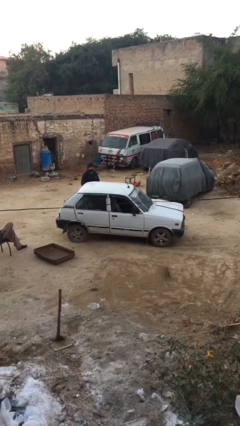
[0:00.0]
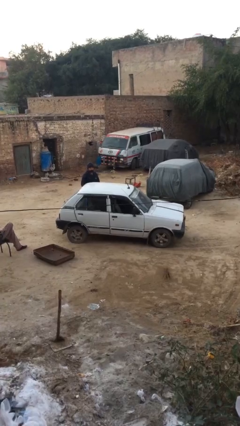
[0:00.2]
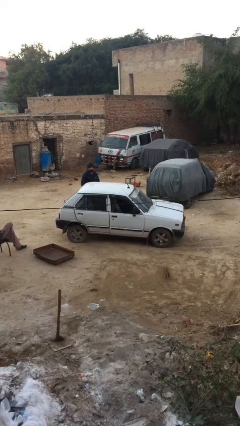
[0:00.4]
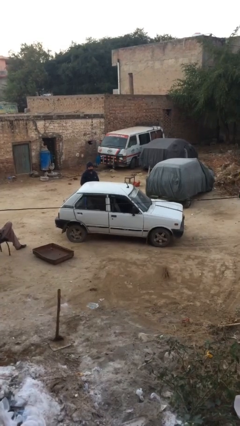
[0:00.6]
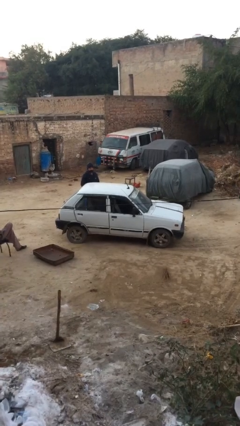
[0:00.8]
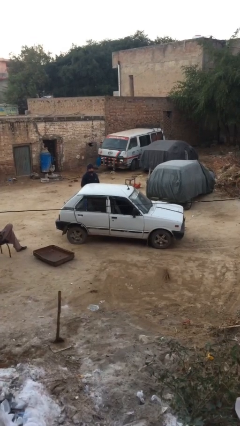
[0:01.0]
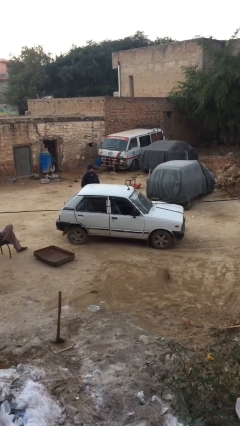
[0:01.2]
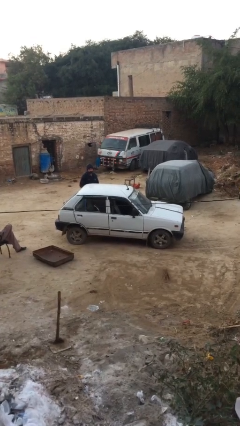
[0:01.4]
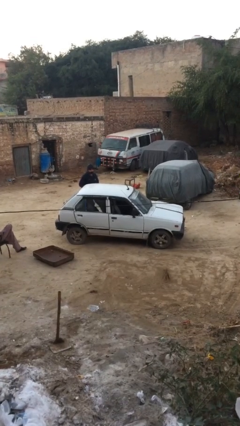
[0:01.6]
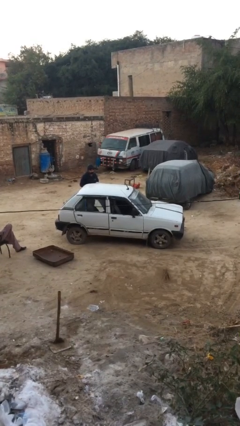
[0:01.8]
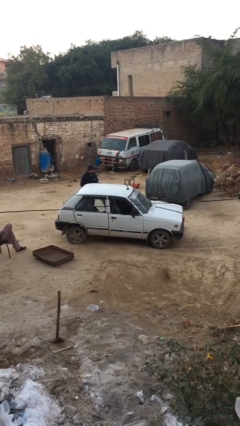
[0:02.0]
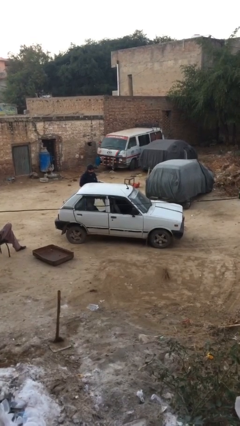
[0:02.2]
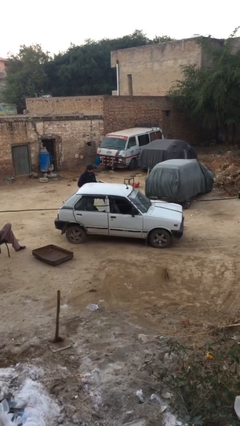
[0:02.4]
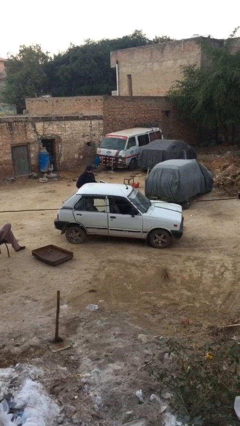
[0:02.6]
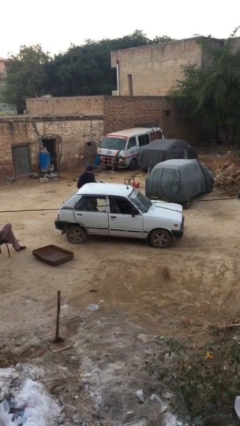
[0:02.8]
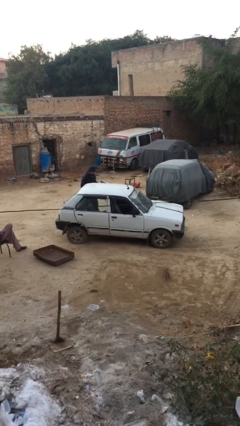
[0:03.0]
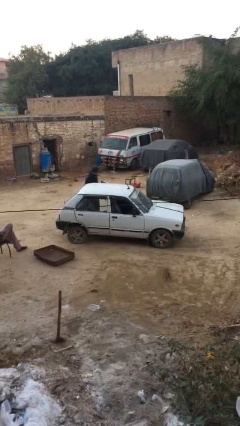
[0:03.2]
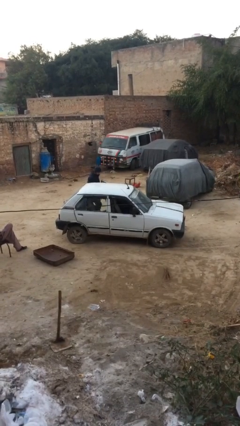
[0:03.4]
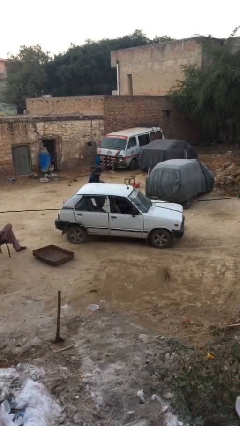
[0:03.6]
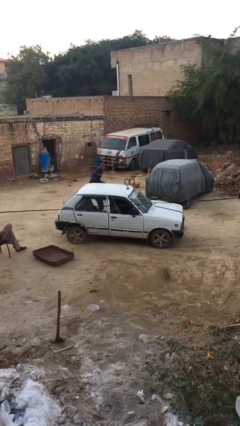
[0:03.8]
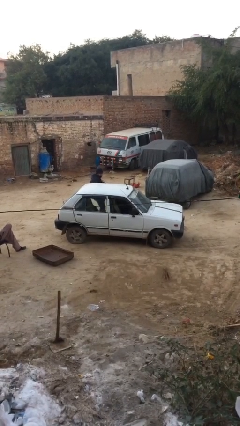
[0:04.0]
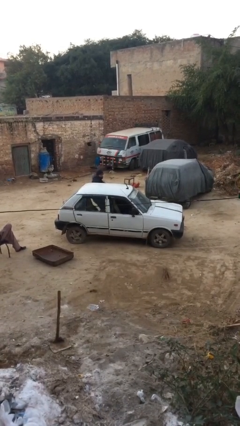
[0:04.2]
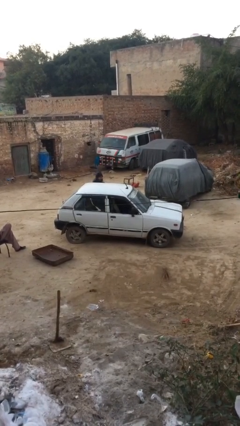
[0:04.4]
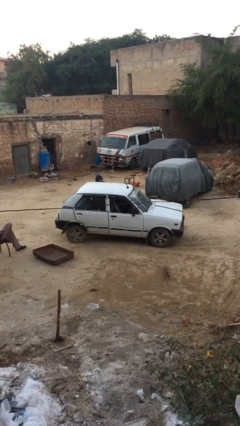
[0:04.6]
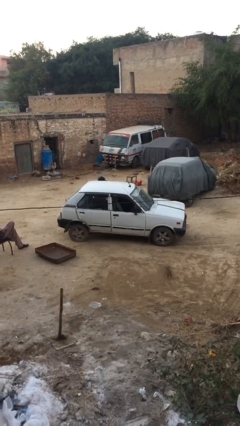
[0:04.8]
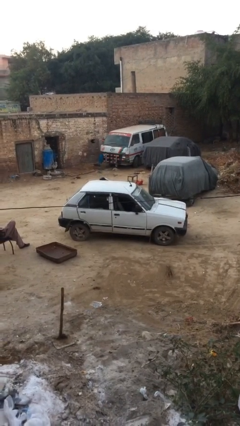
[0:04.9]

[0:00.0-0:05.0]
person enters car

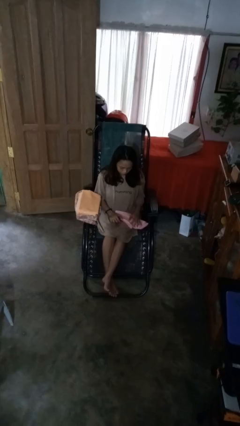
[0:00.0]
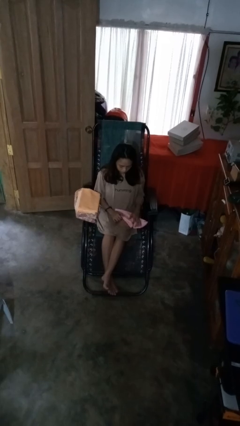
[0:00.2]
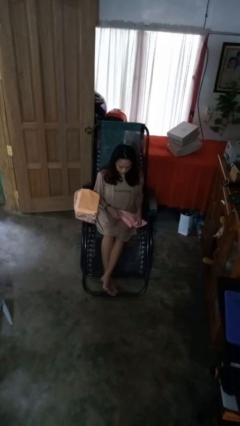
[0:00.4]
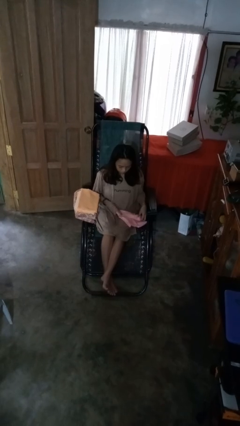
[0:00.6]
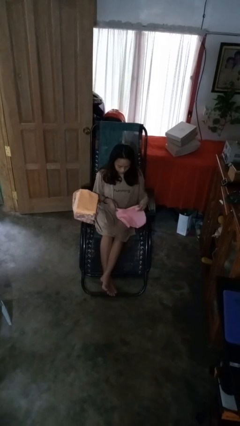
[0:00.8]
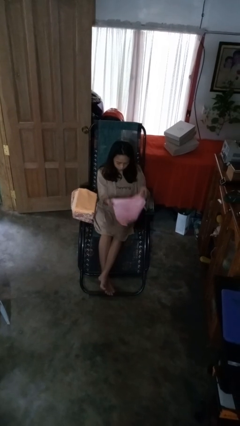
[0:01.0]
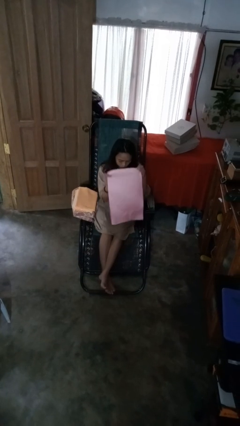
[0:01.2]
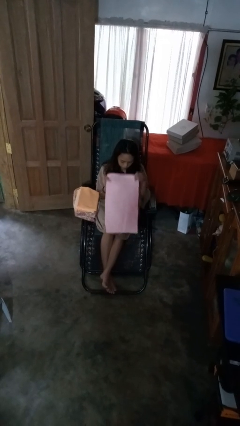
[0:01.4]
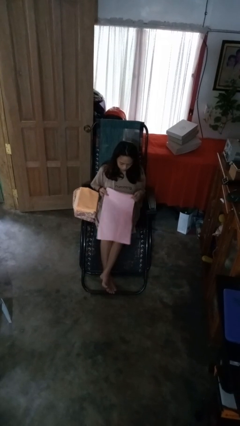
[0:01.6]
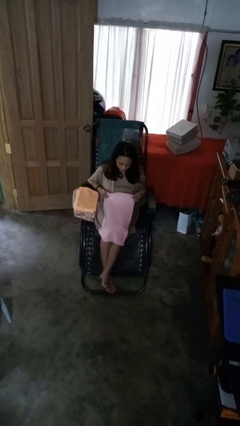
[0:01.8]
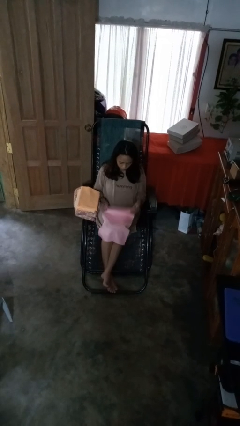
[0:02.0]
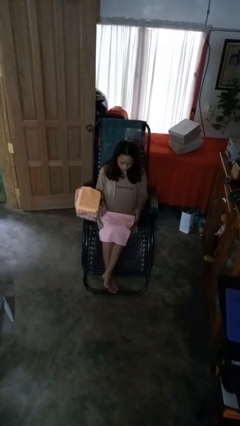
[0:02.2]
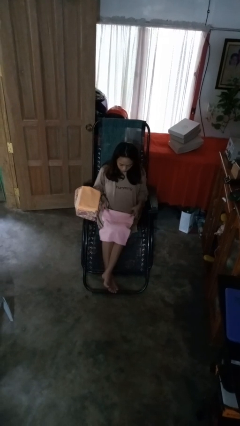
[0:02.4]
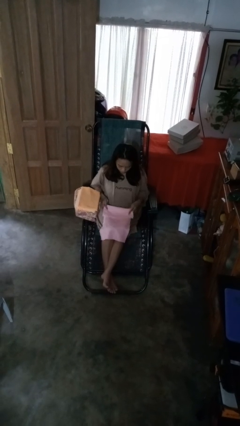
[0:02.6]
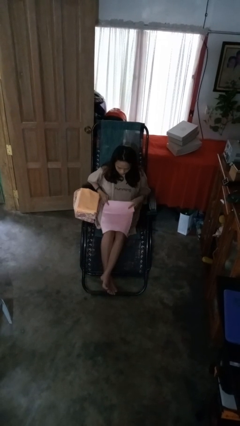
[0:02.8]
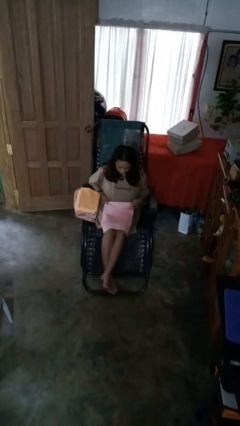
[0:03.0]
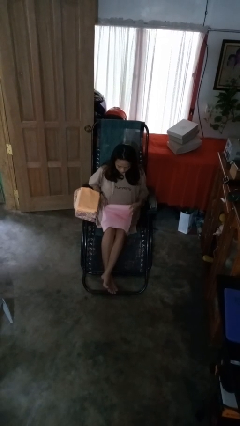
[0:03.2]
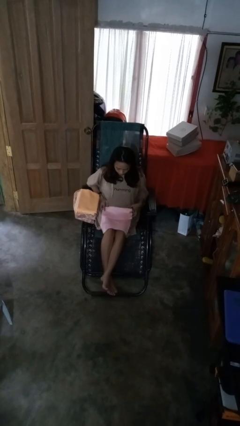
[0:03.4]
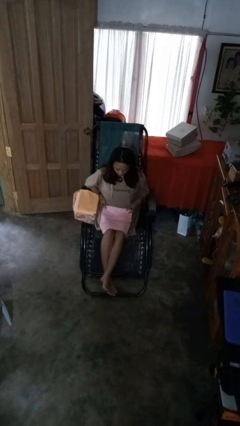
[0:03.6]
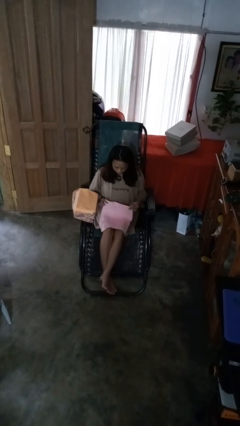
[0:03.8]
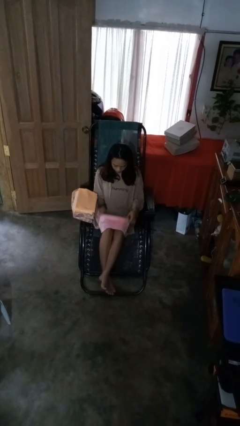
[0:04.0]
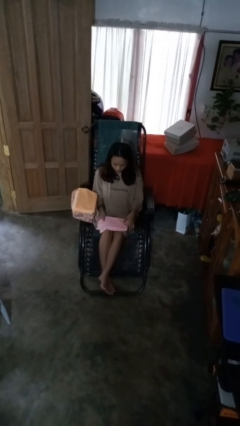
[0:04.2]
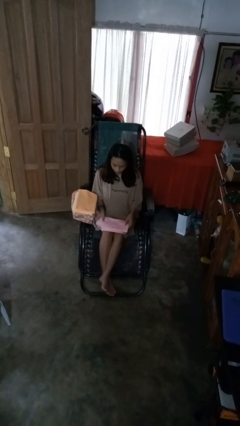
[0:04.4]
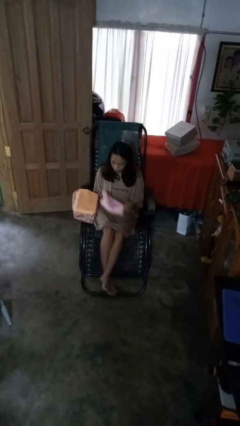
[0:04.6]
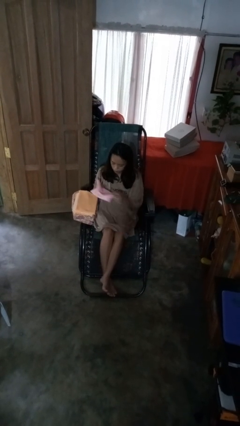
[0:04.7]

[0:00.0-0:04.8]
person folds towel

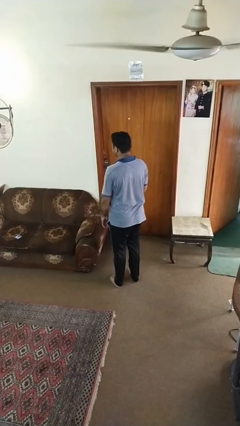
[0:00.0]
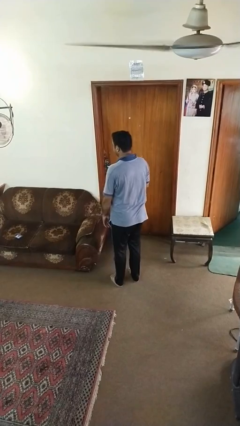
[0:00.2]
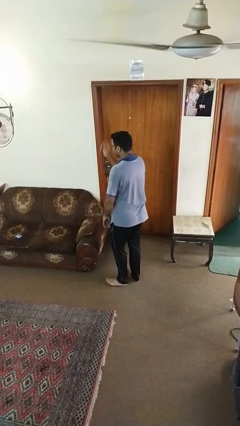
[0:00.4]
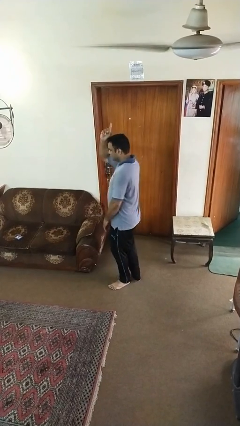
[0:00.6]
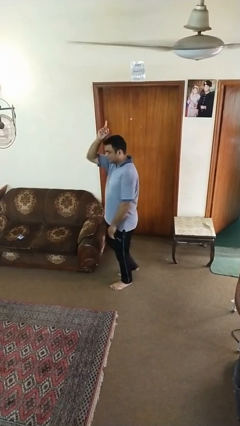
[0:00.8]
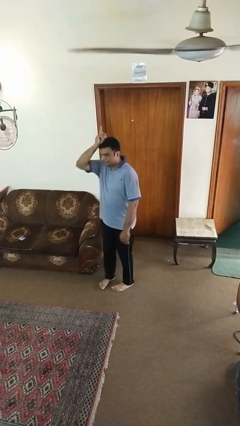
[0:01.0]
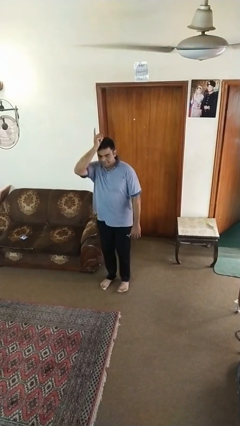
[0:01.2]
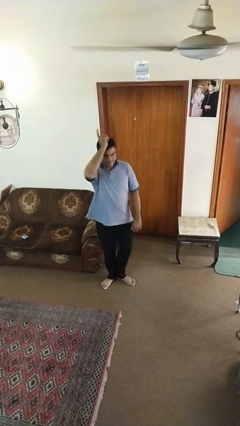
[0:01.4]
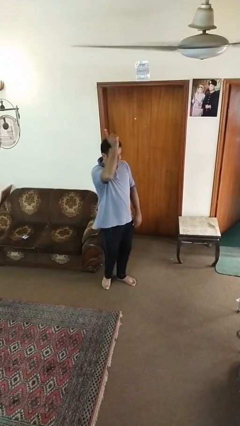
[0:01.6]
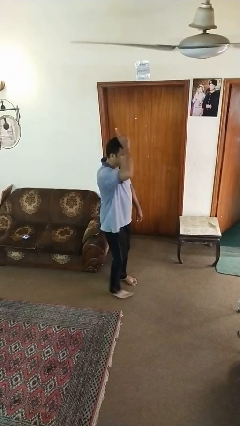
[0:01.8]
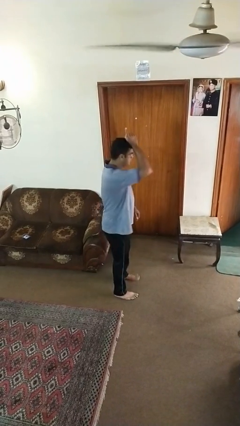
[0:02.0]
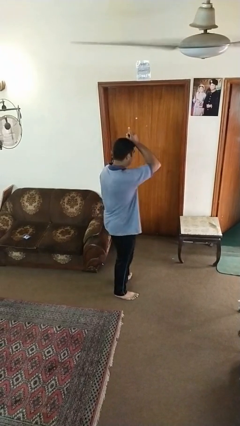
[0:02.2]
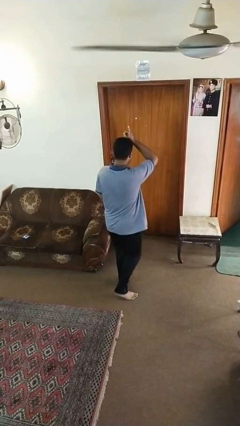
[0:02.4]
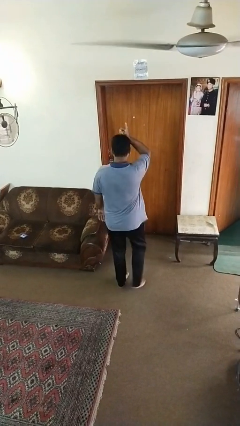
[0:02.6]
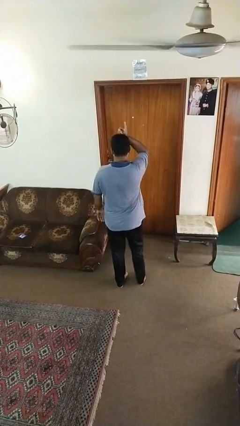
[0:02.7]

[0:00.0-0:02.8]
person twirls

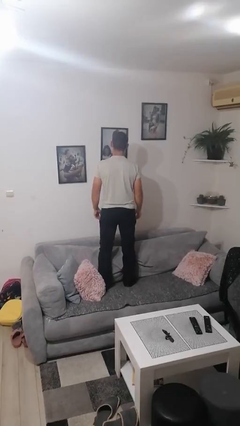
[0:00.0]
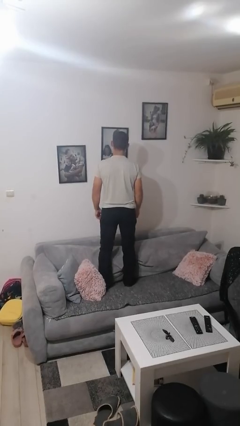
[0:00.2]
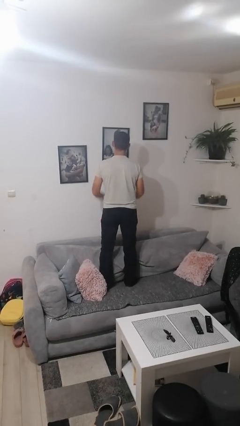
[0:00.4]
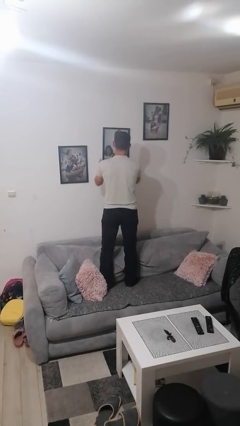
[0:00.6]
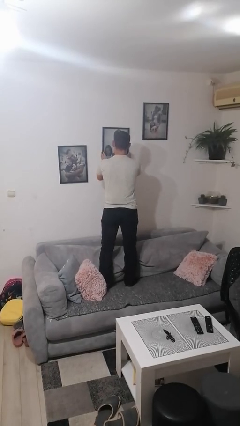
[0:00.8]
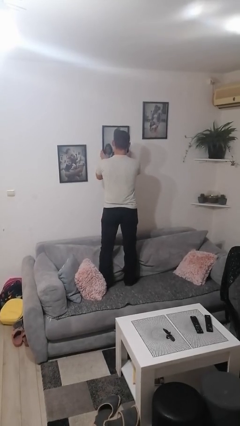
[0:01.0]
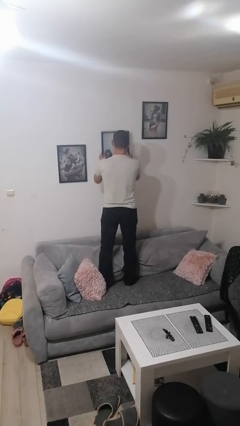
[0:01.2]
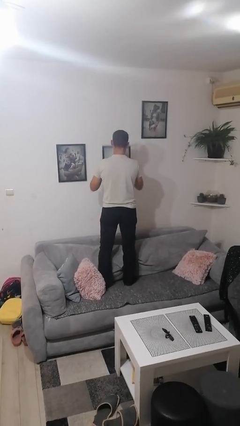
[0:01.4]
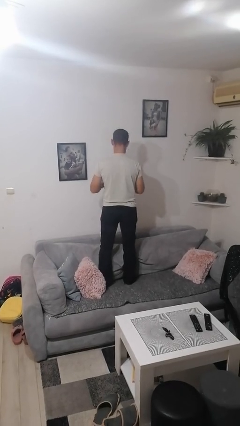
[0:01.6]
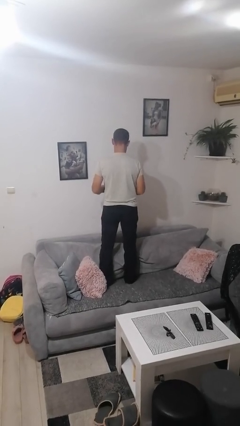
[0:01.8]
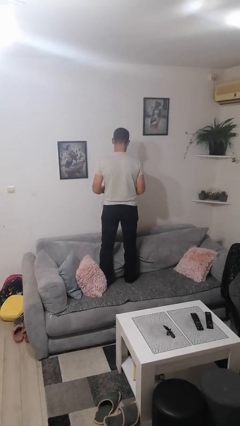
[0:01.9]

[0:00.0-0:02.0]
person takes down picture frame

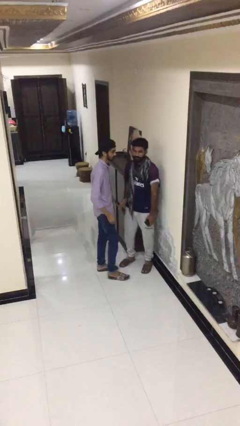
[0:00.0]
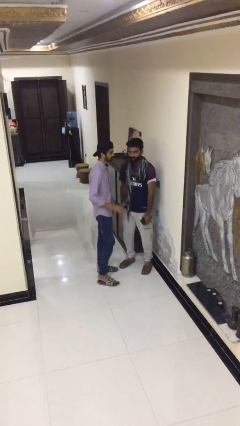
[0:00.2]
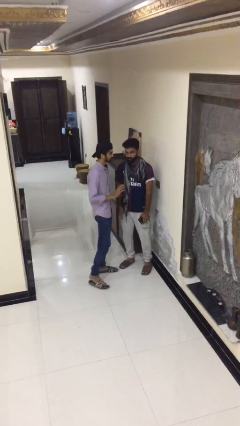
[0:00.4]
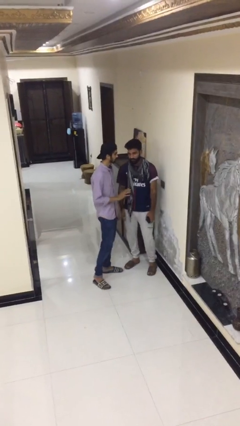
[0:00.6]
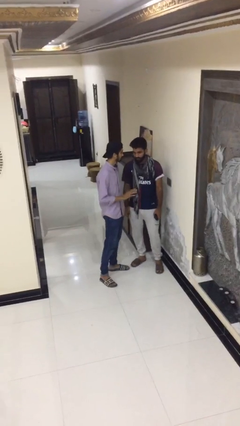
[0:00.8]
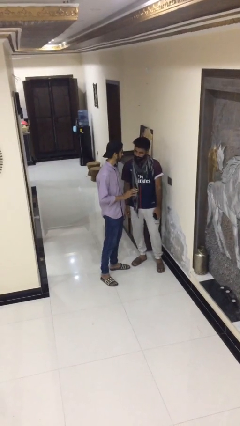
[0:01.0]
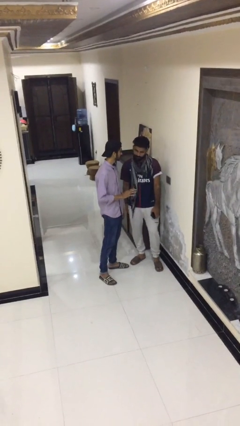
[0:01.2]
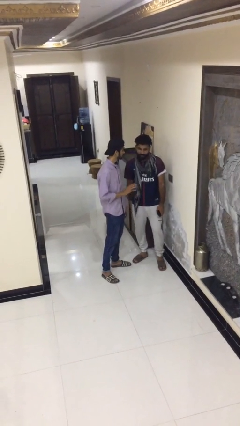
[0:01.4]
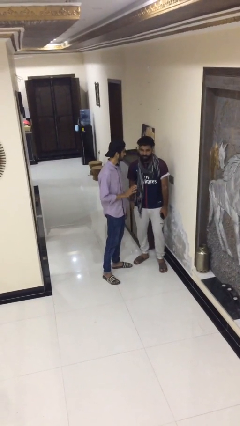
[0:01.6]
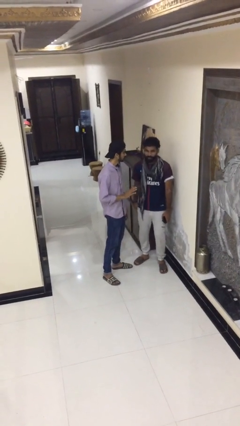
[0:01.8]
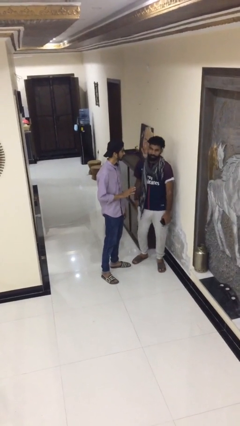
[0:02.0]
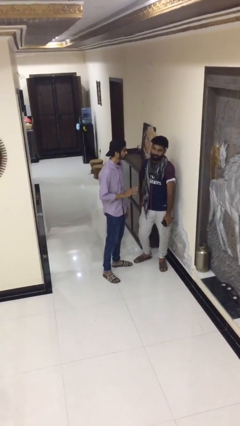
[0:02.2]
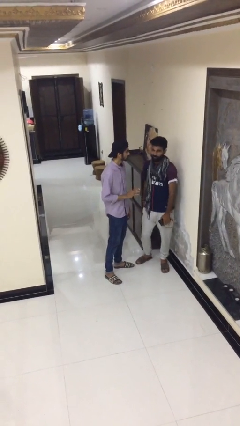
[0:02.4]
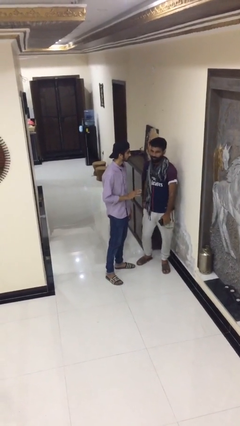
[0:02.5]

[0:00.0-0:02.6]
person talks to person

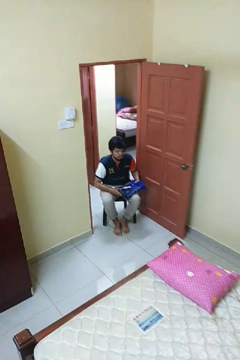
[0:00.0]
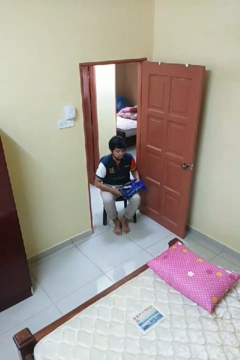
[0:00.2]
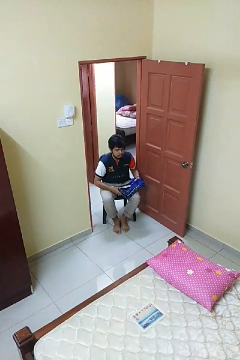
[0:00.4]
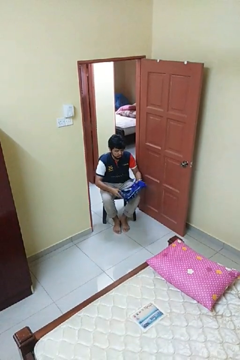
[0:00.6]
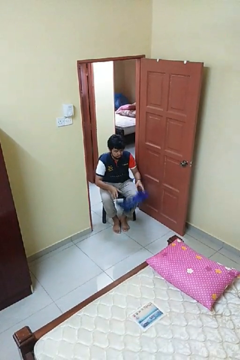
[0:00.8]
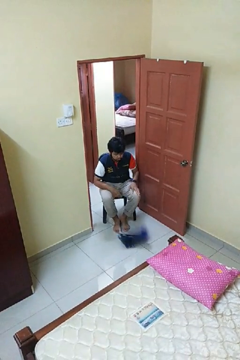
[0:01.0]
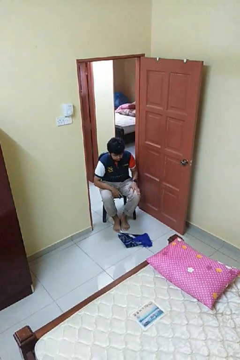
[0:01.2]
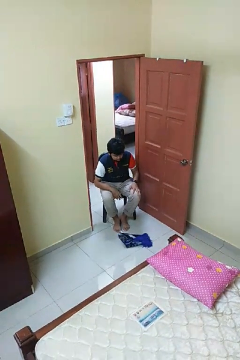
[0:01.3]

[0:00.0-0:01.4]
person drops object
